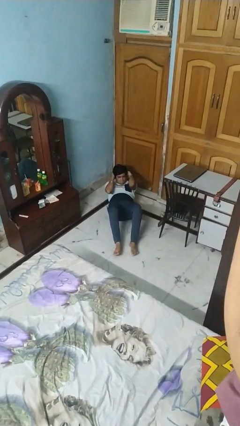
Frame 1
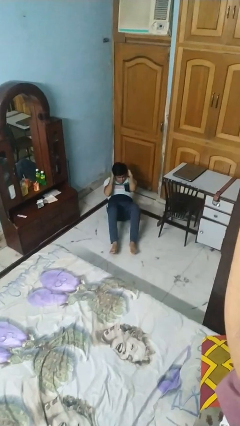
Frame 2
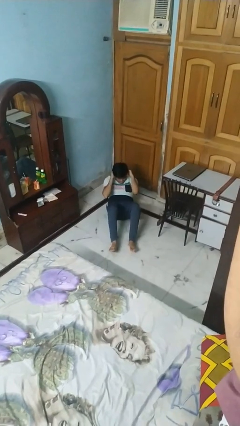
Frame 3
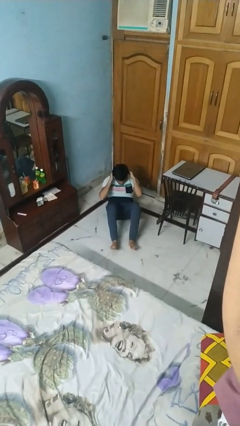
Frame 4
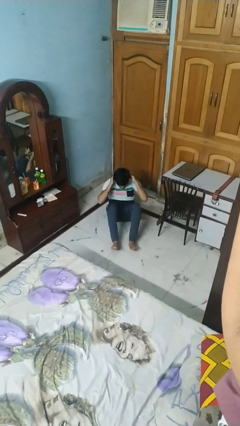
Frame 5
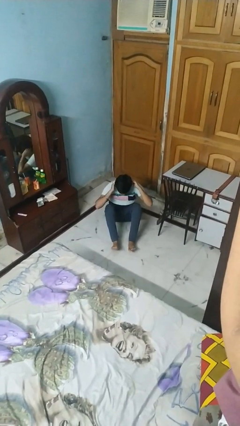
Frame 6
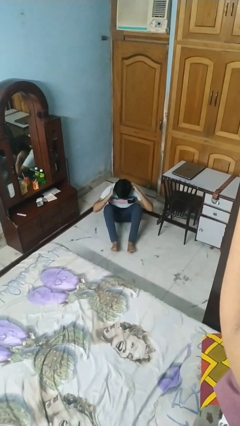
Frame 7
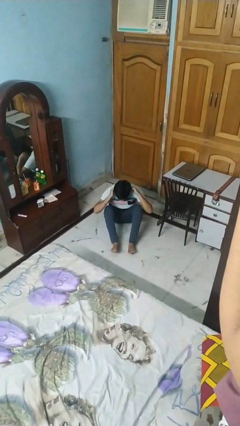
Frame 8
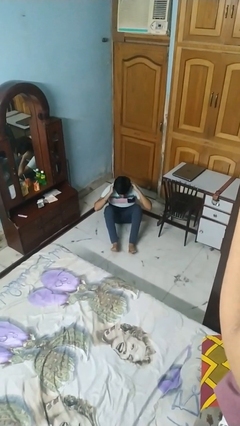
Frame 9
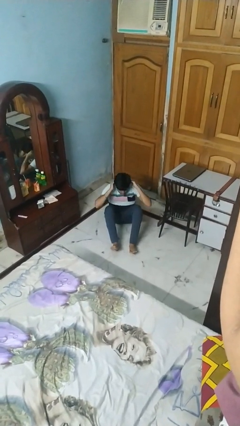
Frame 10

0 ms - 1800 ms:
person exercises with situp

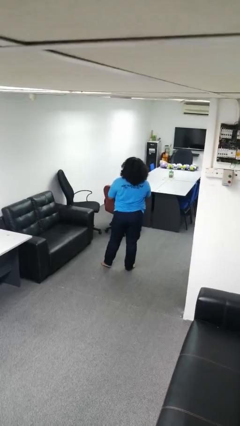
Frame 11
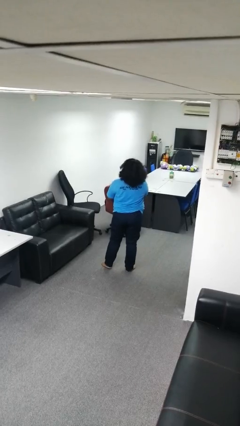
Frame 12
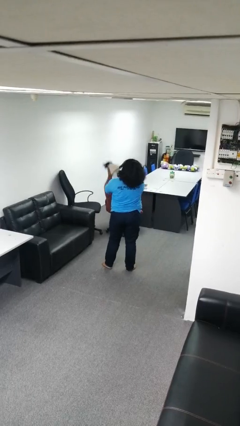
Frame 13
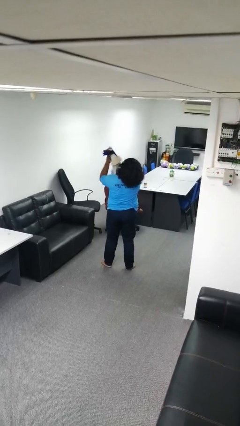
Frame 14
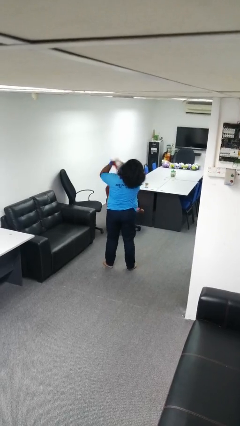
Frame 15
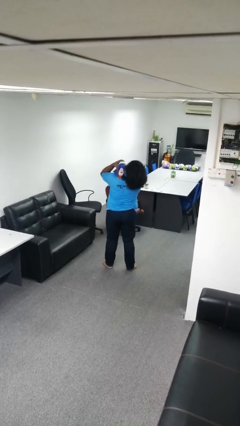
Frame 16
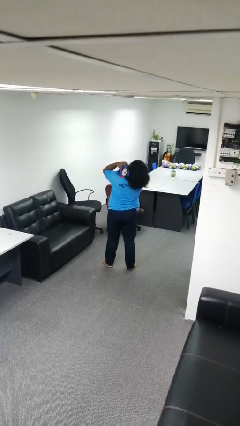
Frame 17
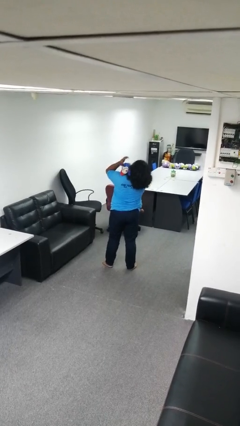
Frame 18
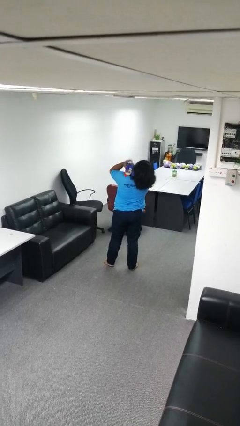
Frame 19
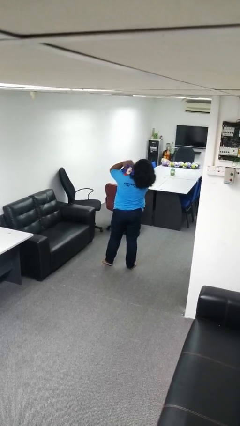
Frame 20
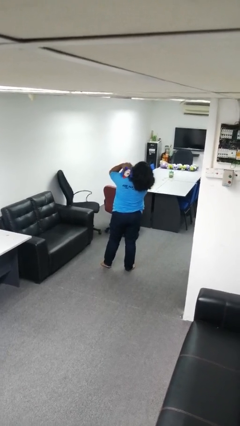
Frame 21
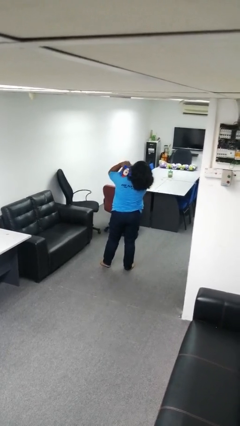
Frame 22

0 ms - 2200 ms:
person hugs stuffed animal

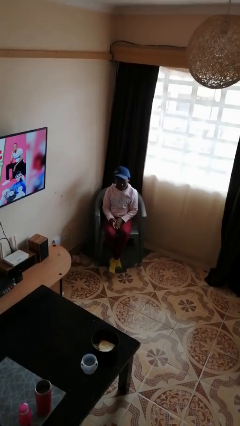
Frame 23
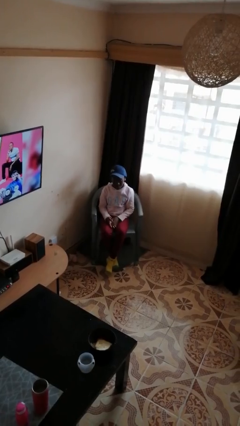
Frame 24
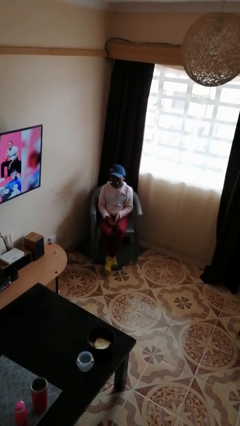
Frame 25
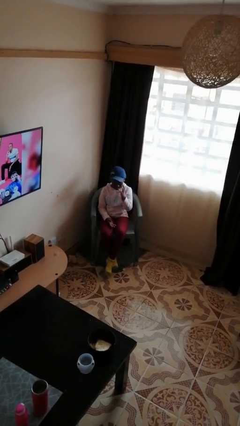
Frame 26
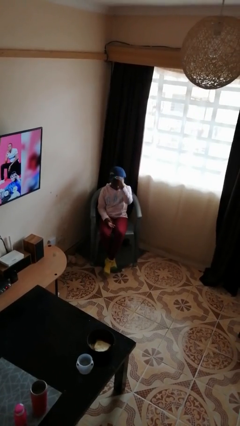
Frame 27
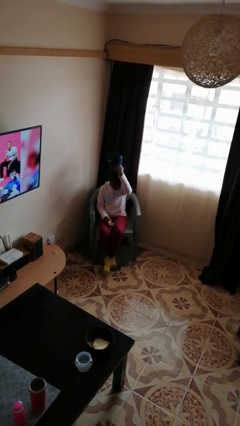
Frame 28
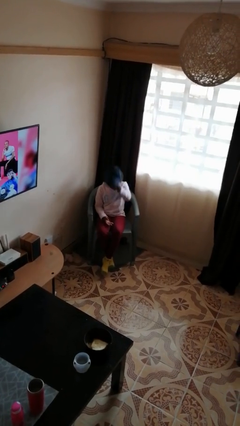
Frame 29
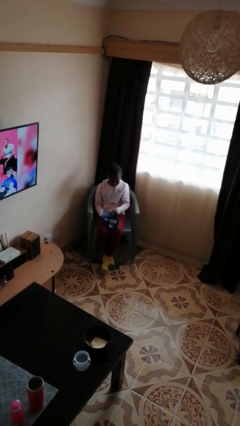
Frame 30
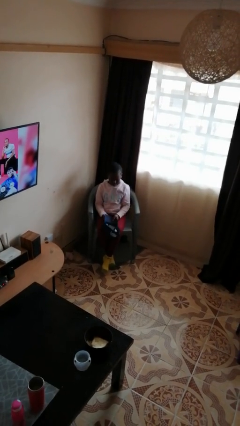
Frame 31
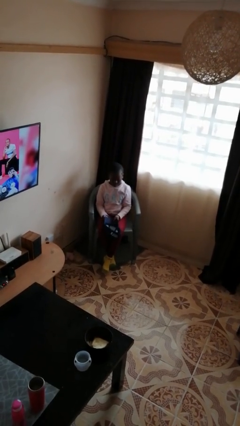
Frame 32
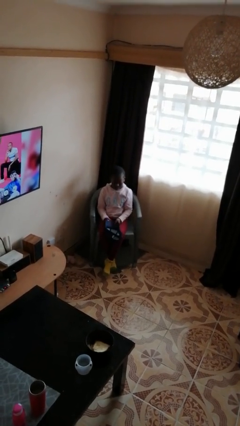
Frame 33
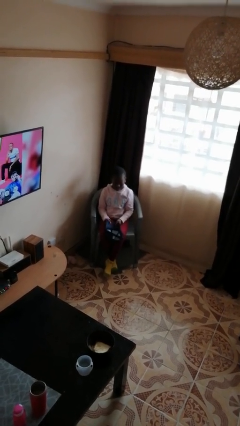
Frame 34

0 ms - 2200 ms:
person takes off hat

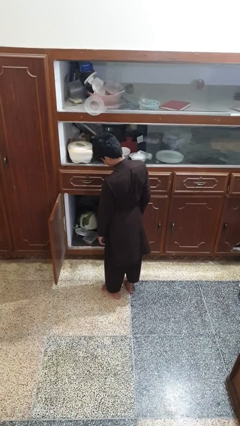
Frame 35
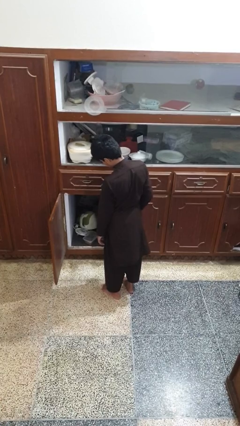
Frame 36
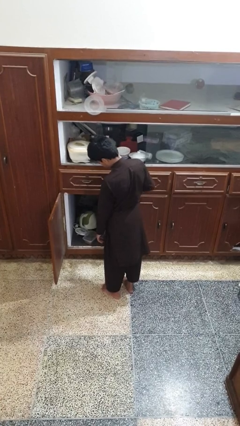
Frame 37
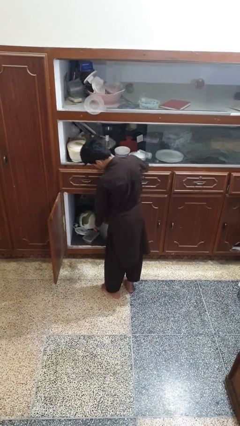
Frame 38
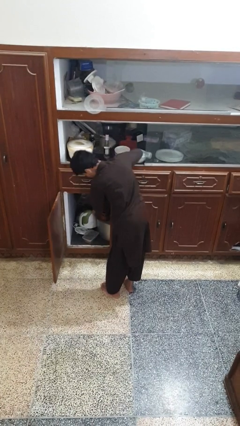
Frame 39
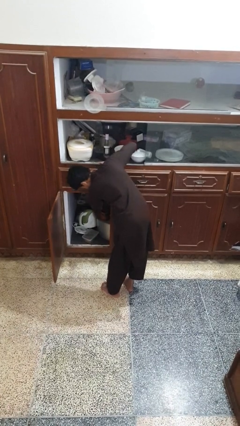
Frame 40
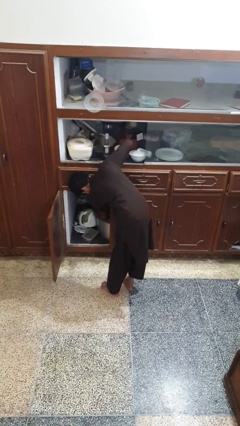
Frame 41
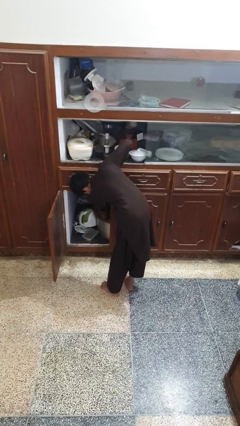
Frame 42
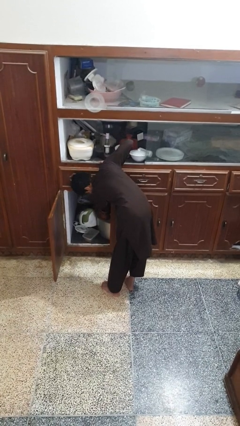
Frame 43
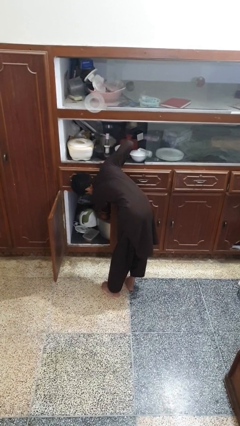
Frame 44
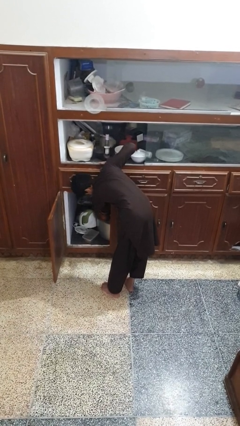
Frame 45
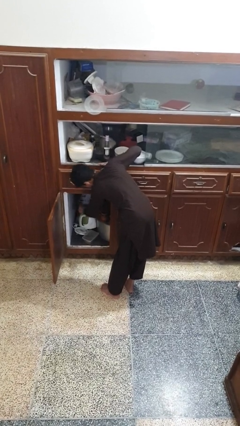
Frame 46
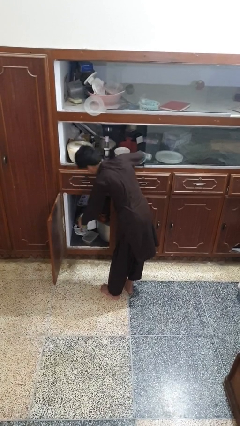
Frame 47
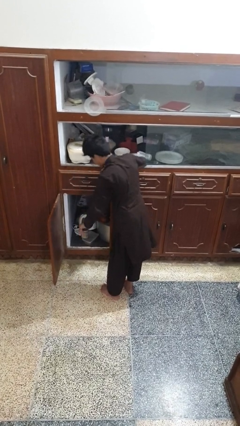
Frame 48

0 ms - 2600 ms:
person takes object from cabinet

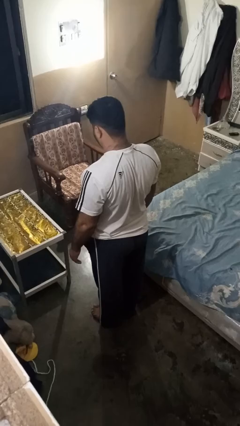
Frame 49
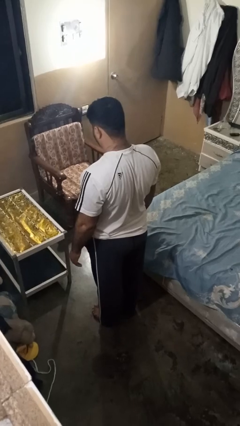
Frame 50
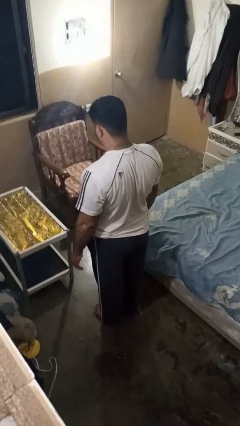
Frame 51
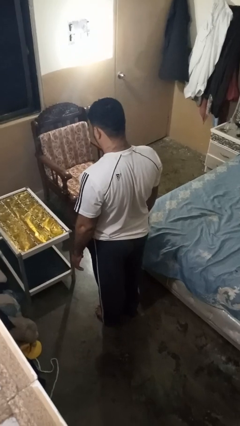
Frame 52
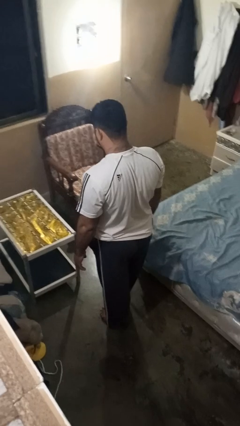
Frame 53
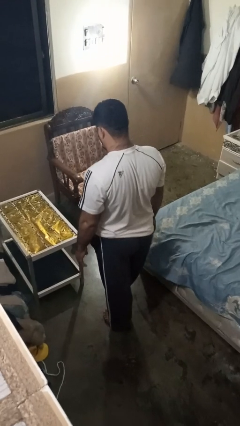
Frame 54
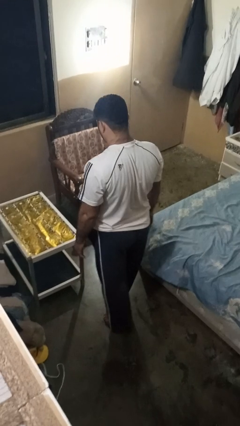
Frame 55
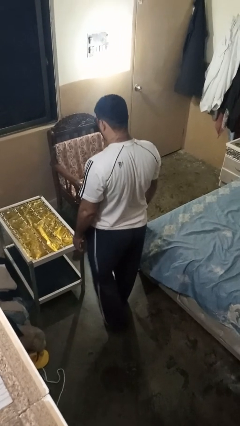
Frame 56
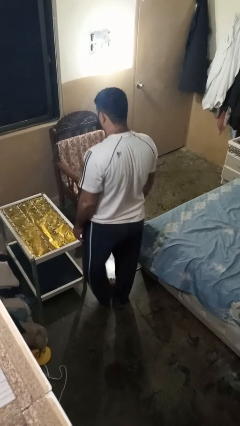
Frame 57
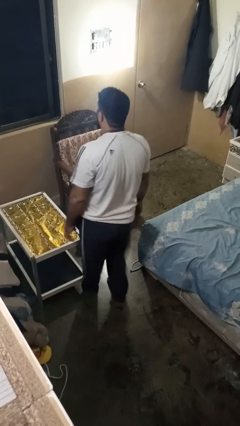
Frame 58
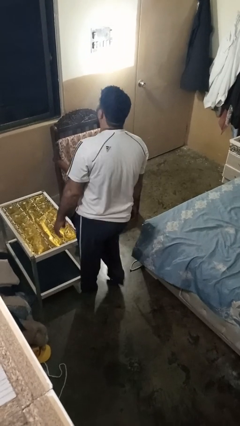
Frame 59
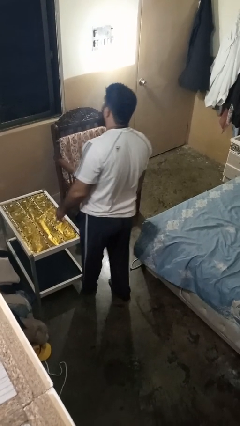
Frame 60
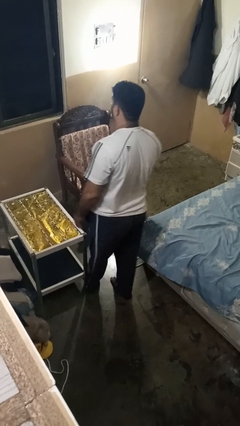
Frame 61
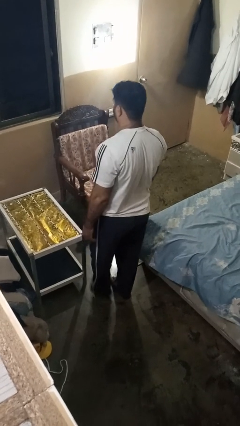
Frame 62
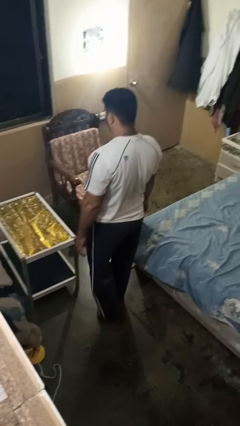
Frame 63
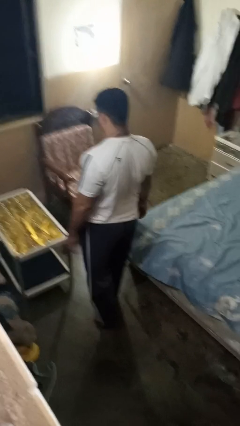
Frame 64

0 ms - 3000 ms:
person bumps into table

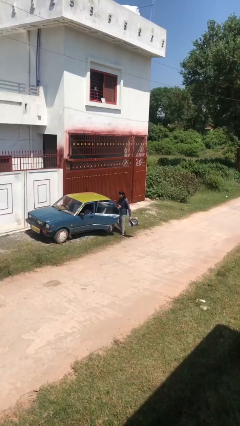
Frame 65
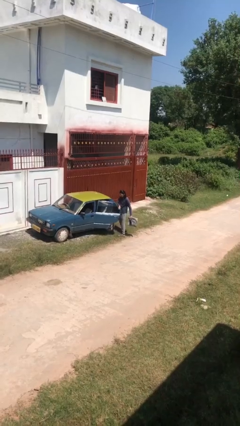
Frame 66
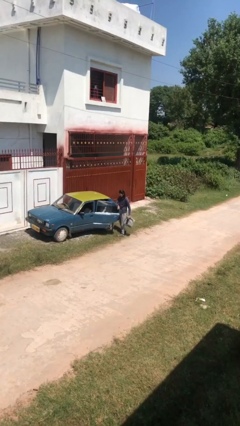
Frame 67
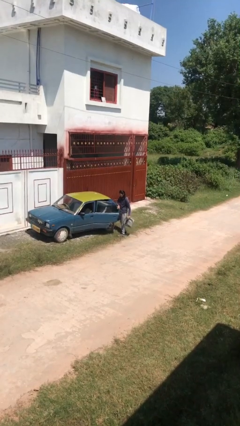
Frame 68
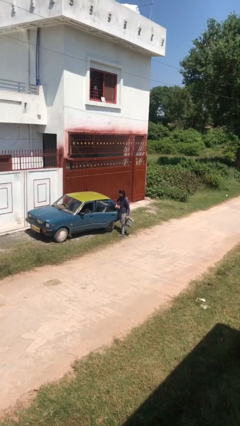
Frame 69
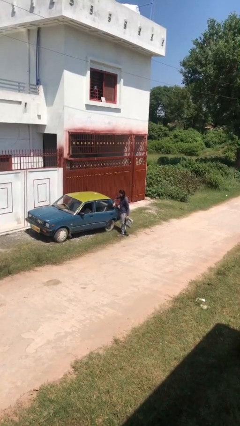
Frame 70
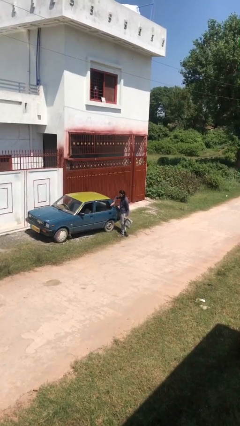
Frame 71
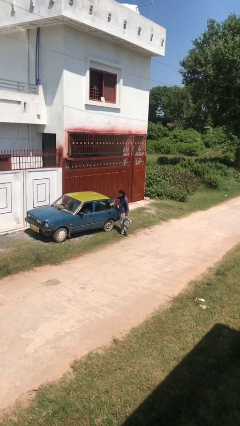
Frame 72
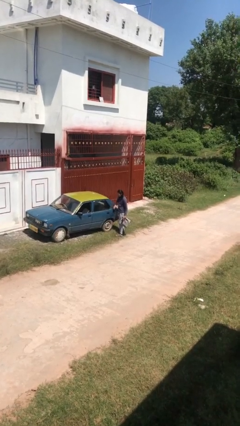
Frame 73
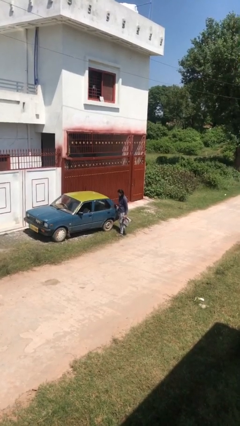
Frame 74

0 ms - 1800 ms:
person closes car door

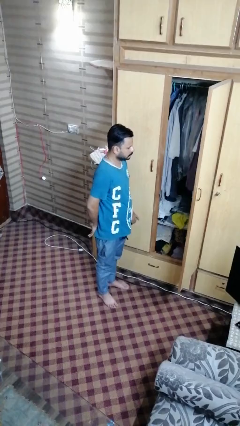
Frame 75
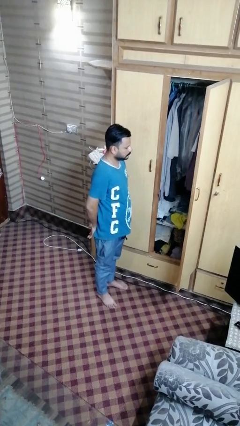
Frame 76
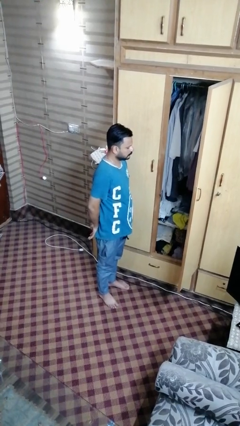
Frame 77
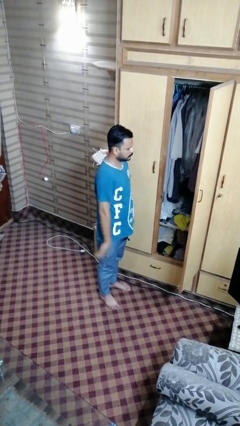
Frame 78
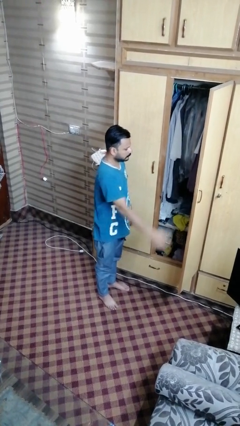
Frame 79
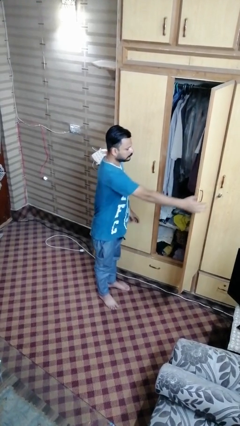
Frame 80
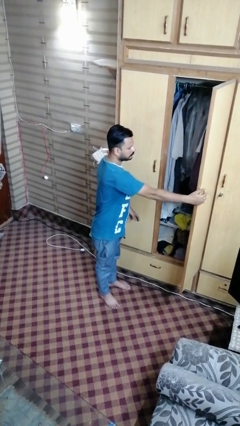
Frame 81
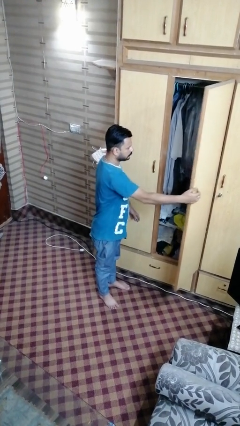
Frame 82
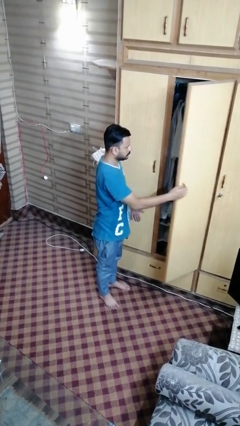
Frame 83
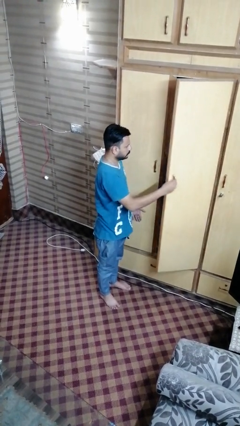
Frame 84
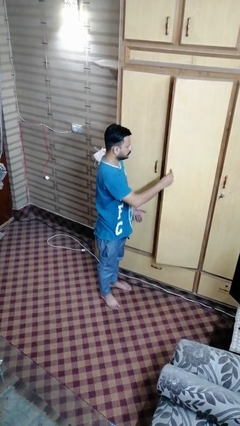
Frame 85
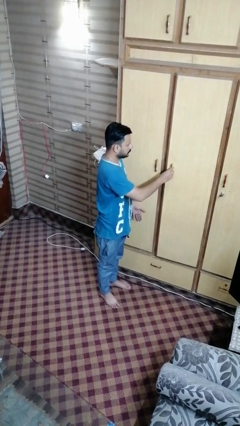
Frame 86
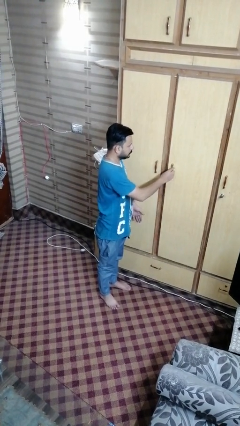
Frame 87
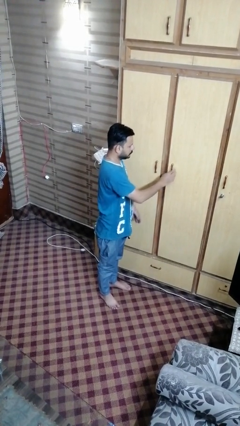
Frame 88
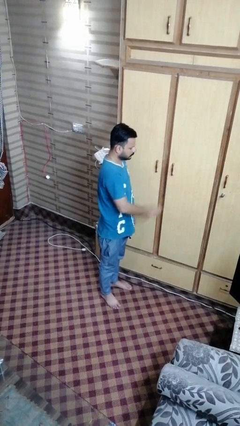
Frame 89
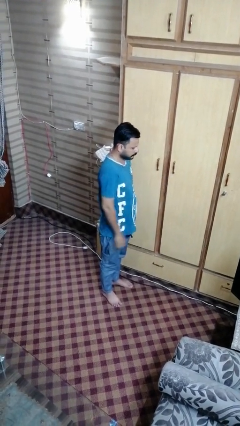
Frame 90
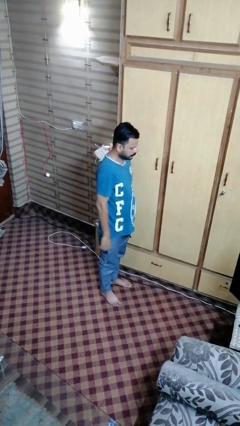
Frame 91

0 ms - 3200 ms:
person closes closet door
